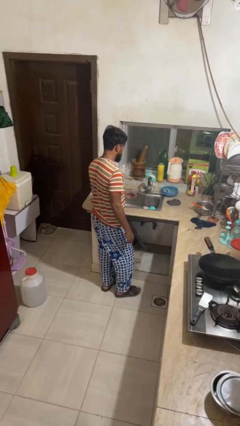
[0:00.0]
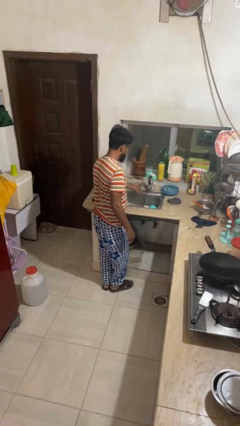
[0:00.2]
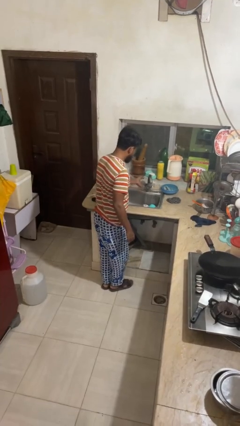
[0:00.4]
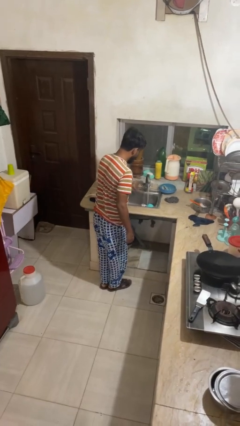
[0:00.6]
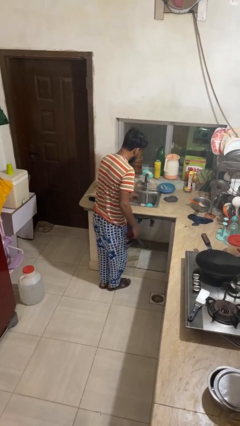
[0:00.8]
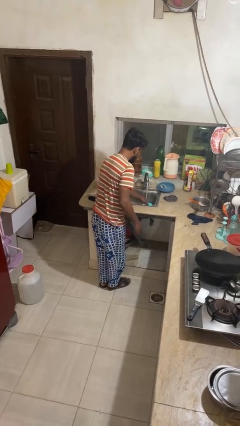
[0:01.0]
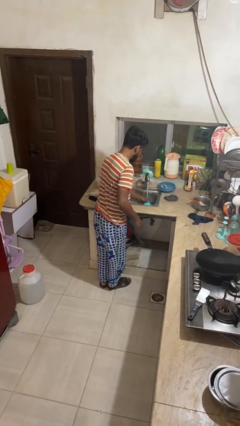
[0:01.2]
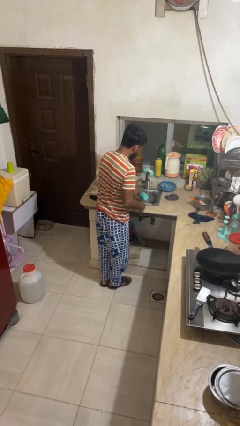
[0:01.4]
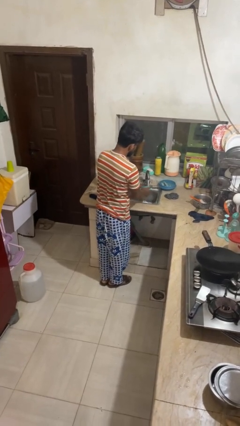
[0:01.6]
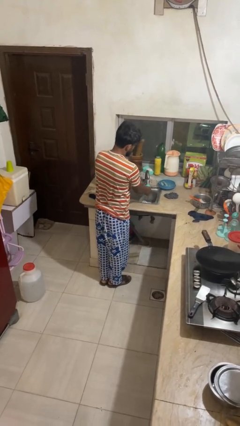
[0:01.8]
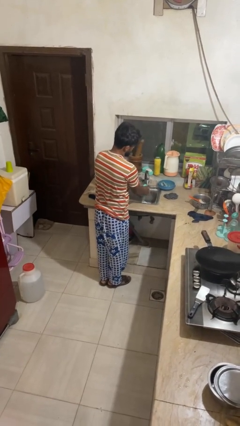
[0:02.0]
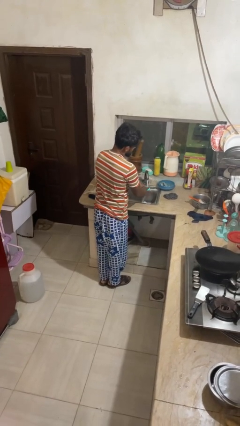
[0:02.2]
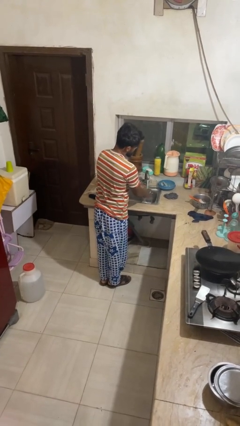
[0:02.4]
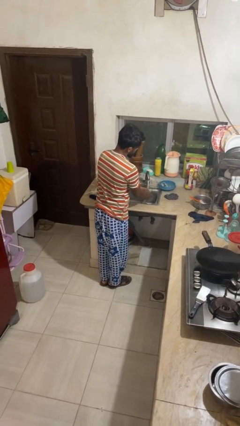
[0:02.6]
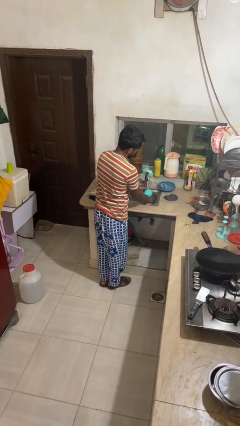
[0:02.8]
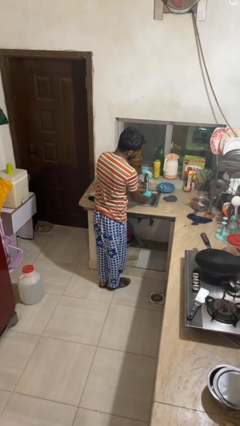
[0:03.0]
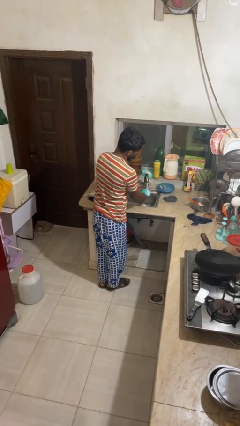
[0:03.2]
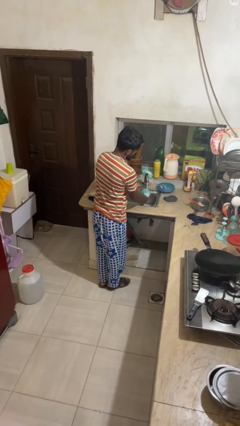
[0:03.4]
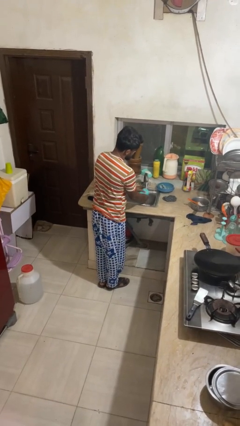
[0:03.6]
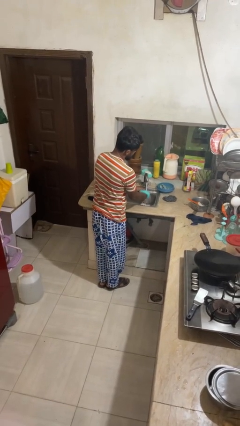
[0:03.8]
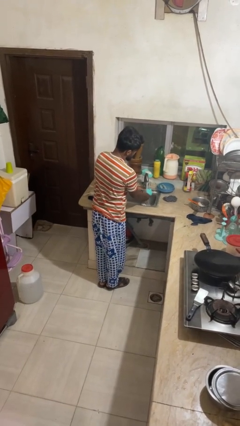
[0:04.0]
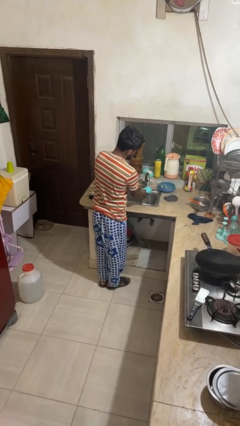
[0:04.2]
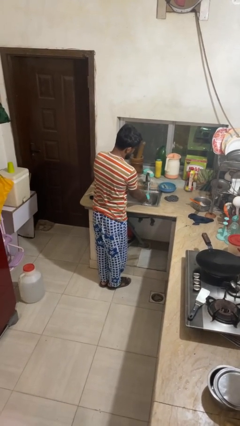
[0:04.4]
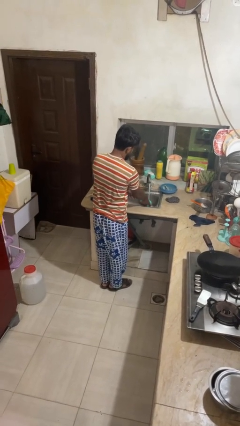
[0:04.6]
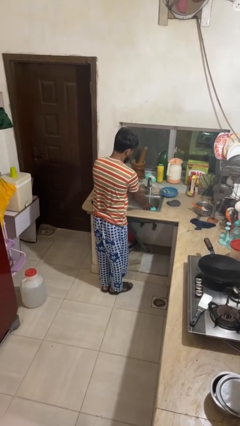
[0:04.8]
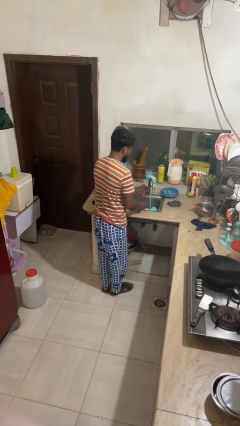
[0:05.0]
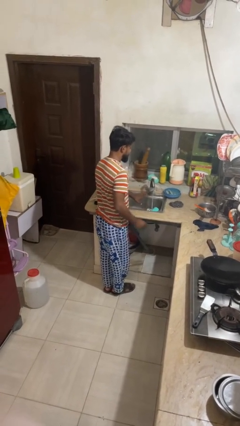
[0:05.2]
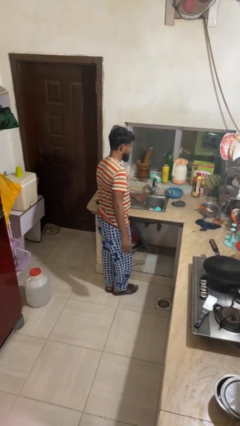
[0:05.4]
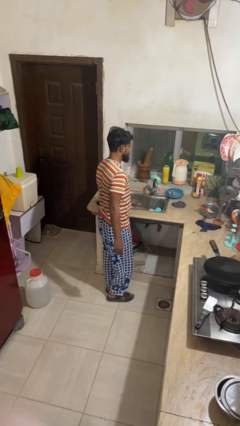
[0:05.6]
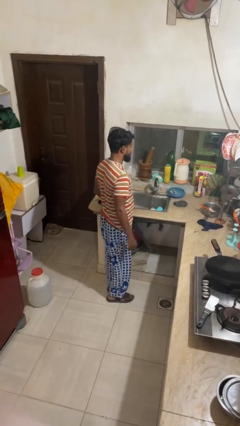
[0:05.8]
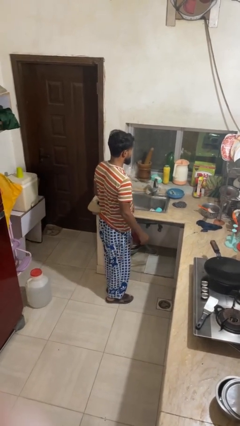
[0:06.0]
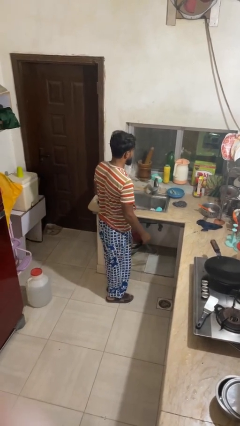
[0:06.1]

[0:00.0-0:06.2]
person washes dish

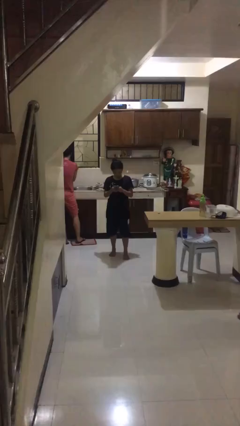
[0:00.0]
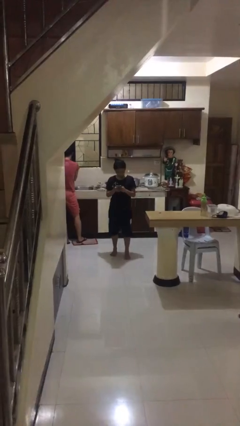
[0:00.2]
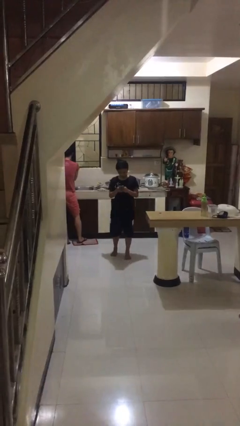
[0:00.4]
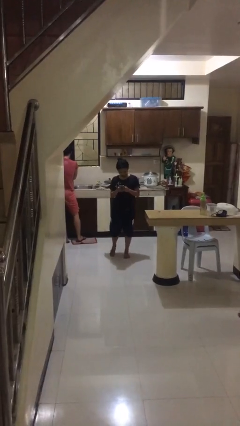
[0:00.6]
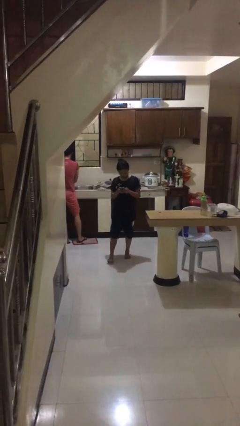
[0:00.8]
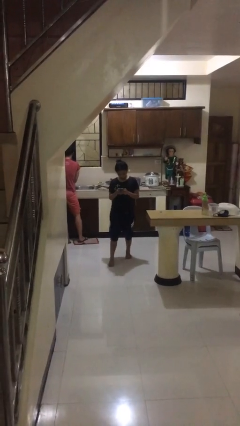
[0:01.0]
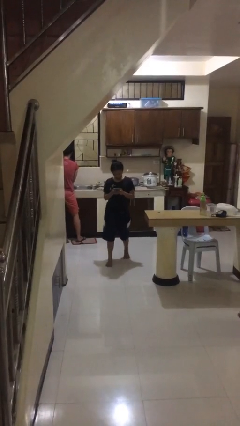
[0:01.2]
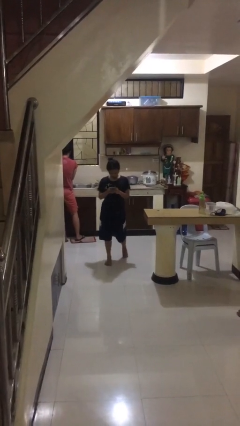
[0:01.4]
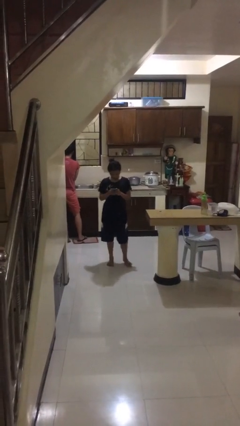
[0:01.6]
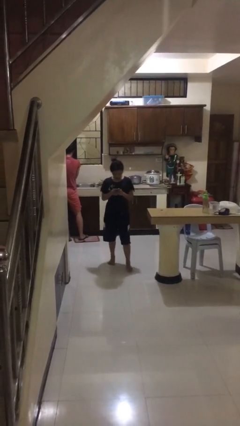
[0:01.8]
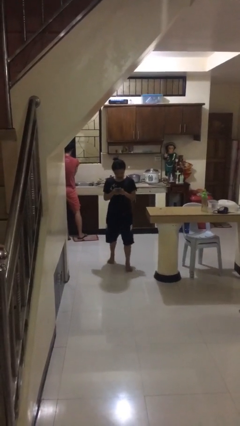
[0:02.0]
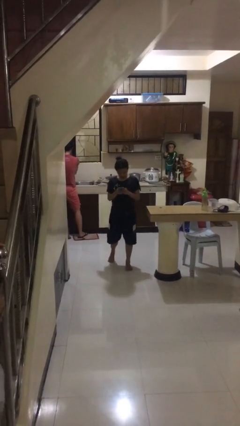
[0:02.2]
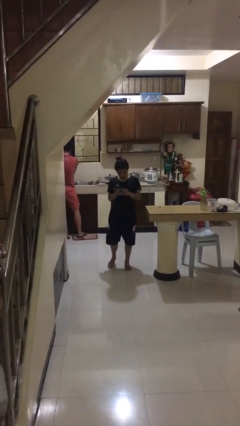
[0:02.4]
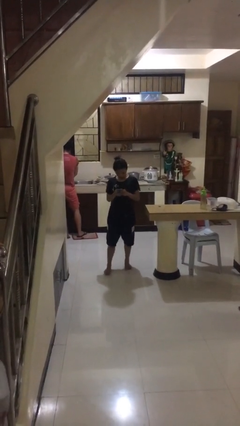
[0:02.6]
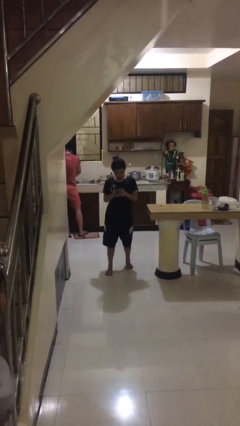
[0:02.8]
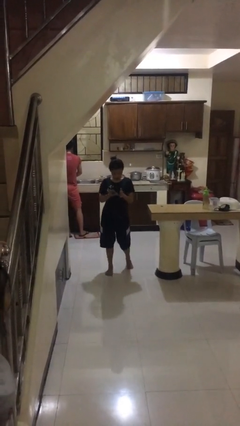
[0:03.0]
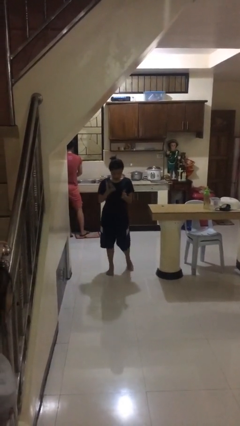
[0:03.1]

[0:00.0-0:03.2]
person texts on phone

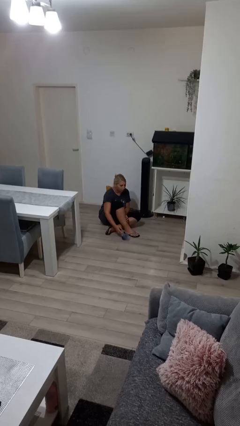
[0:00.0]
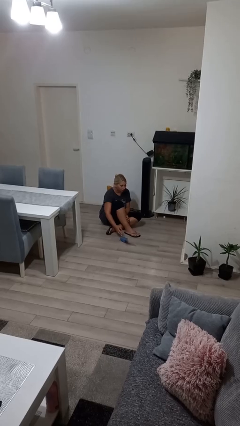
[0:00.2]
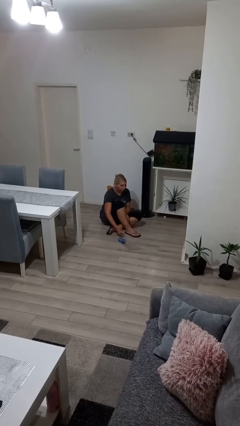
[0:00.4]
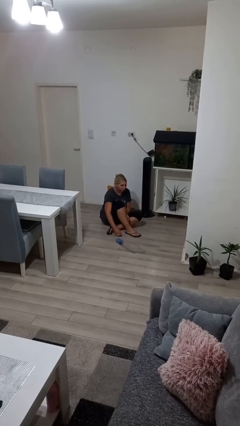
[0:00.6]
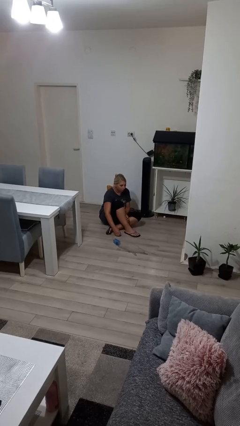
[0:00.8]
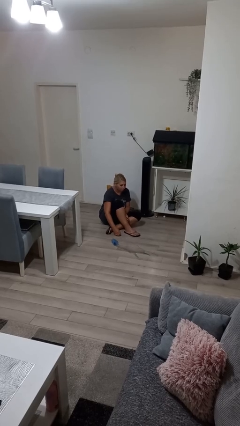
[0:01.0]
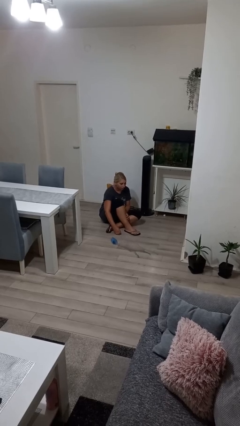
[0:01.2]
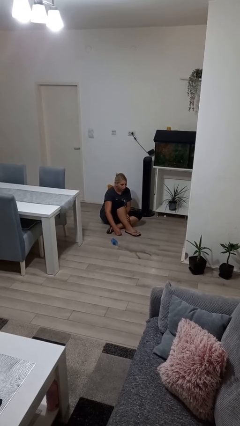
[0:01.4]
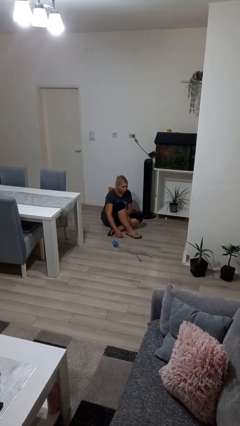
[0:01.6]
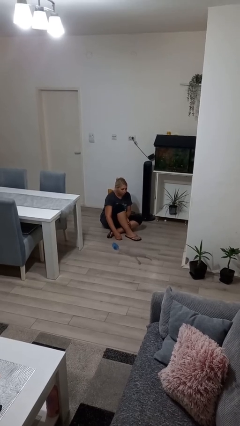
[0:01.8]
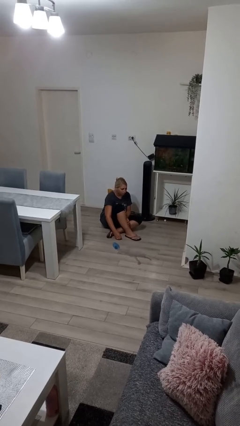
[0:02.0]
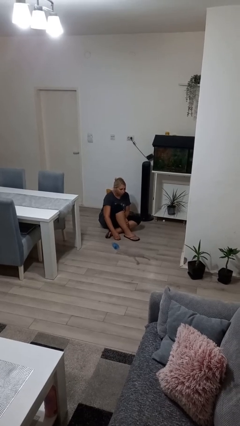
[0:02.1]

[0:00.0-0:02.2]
person spills on floor

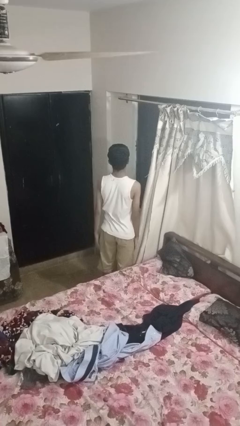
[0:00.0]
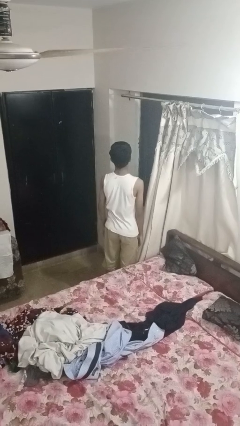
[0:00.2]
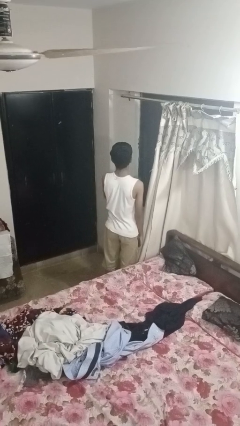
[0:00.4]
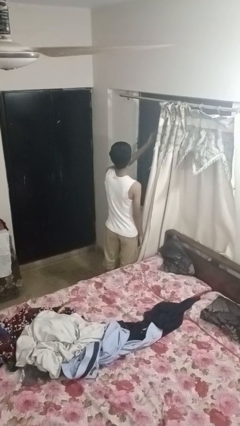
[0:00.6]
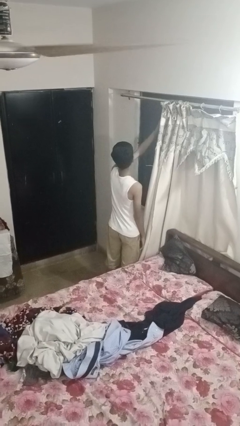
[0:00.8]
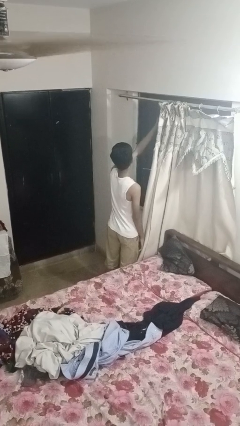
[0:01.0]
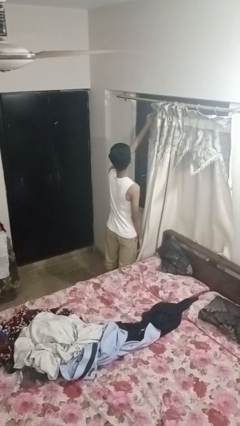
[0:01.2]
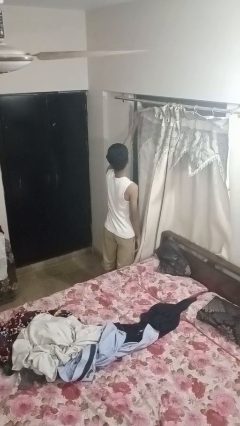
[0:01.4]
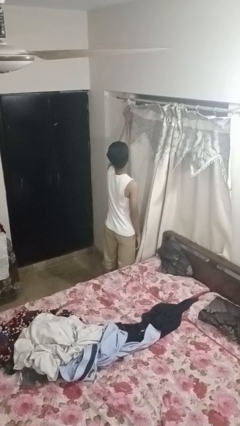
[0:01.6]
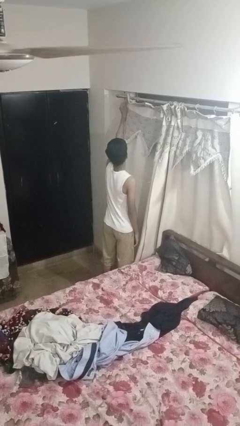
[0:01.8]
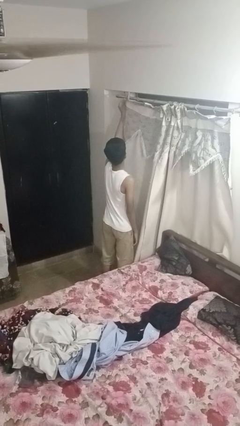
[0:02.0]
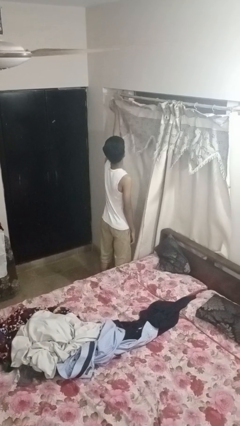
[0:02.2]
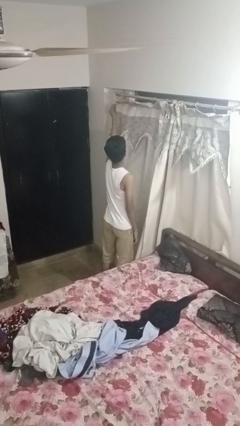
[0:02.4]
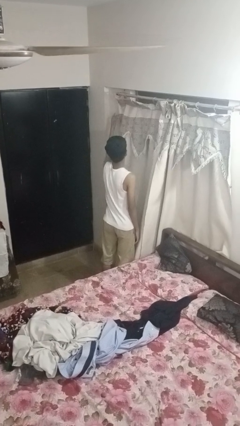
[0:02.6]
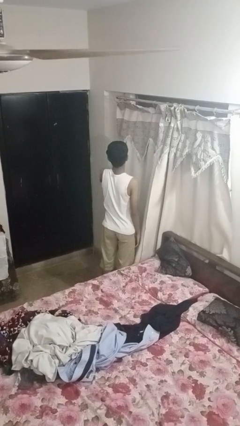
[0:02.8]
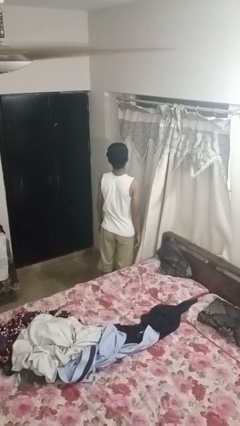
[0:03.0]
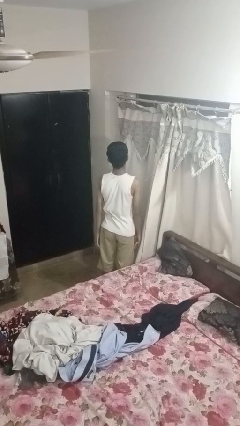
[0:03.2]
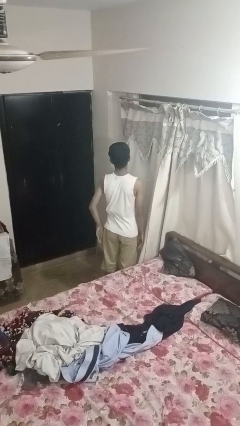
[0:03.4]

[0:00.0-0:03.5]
person closes curtains

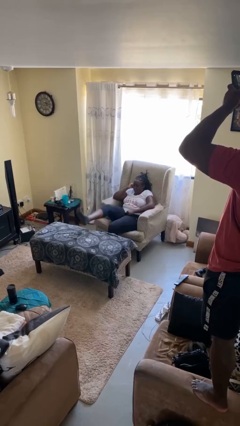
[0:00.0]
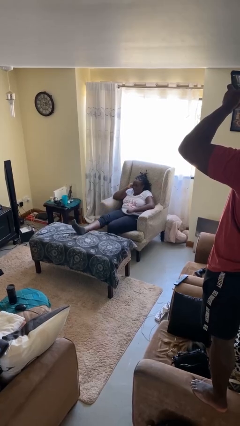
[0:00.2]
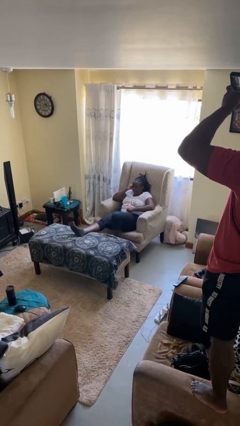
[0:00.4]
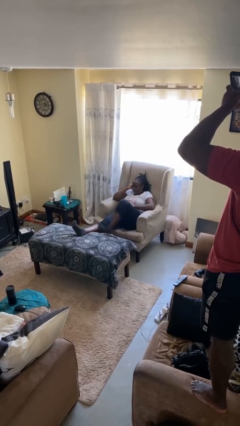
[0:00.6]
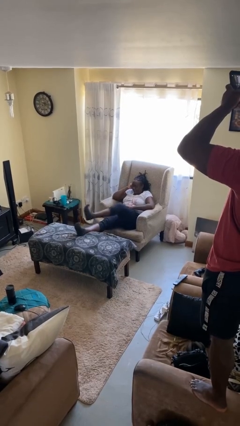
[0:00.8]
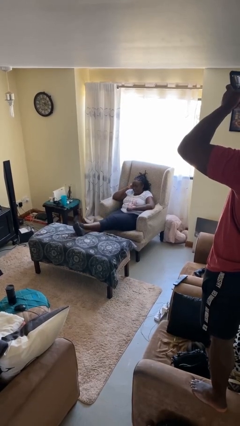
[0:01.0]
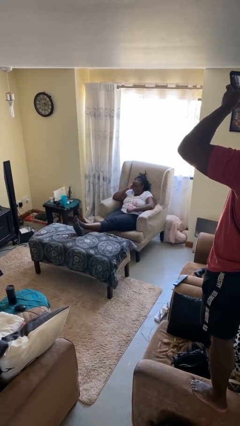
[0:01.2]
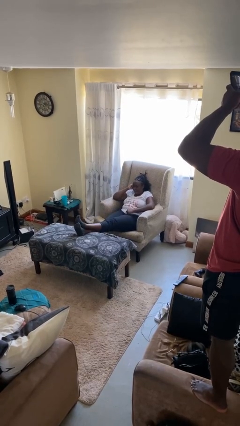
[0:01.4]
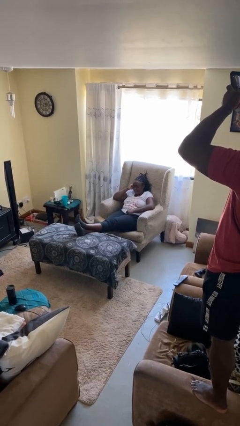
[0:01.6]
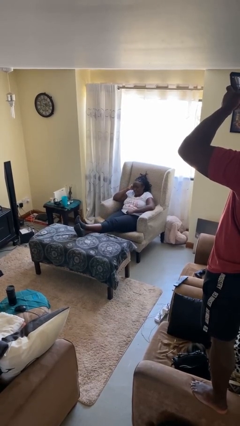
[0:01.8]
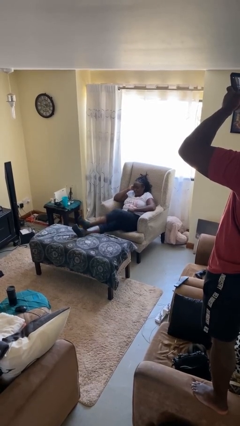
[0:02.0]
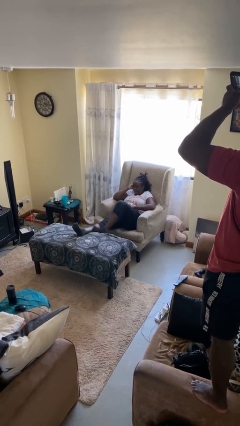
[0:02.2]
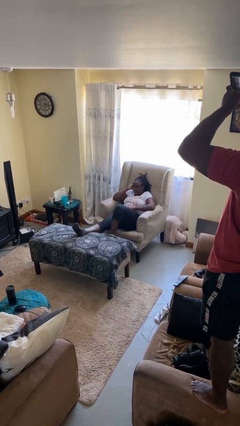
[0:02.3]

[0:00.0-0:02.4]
person puts feet up
